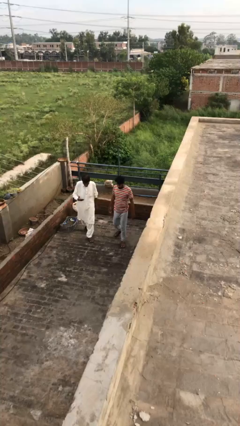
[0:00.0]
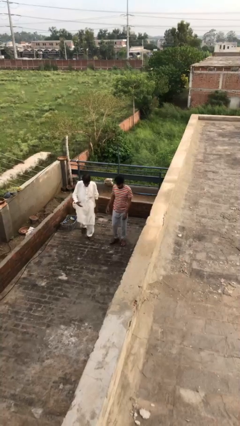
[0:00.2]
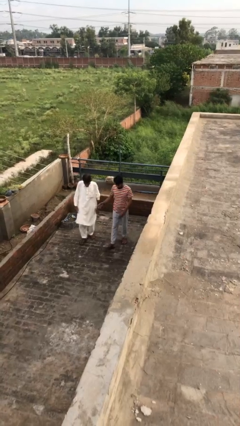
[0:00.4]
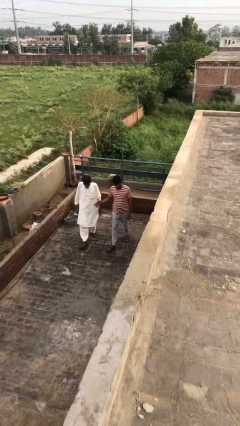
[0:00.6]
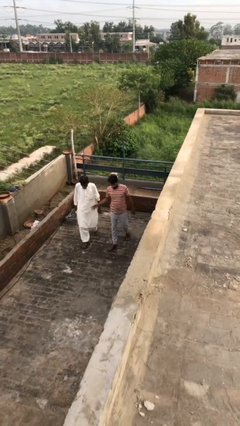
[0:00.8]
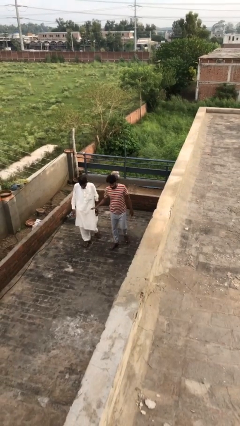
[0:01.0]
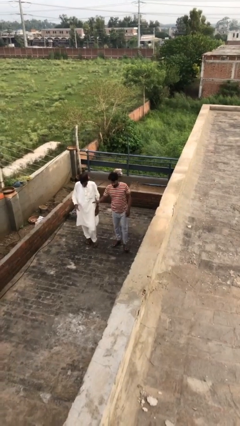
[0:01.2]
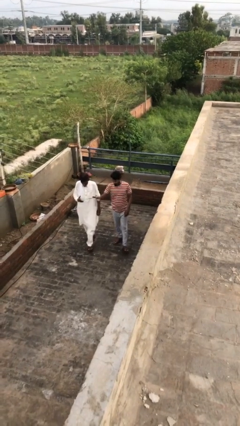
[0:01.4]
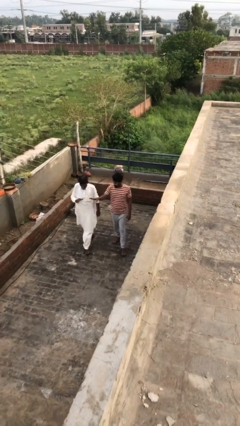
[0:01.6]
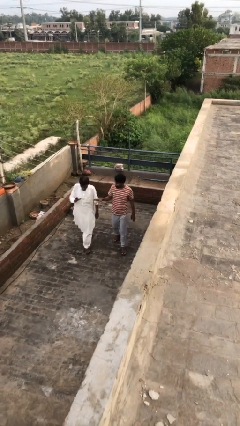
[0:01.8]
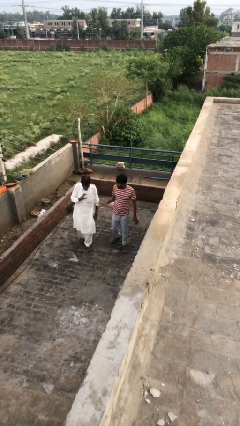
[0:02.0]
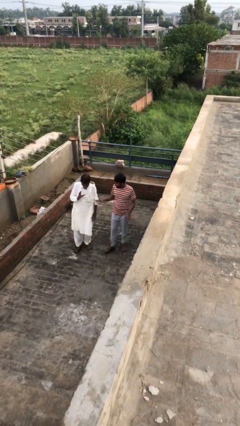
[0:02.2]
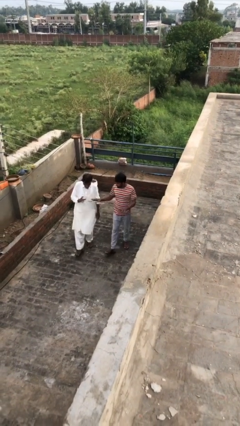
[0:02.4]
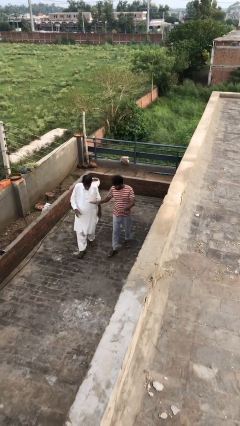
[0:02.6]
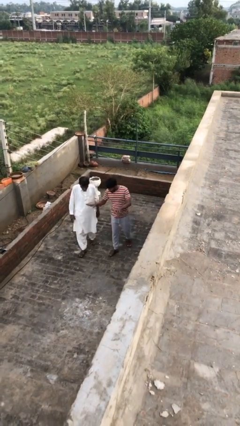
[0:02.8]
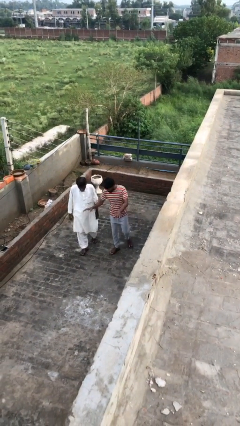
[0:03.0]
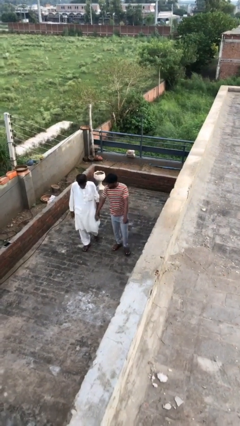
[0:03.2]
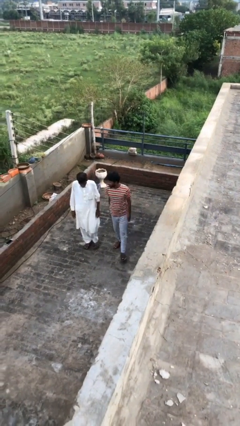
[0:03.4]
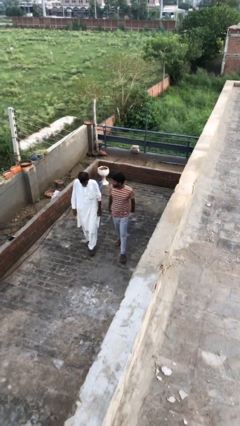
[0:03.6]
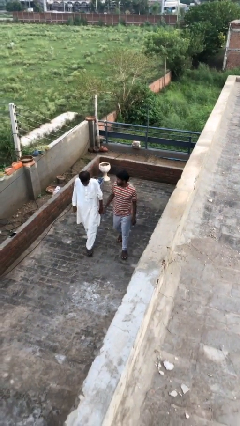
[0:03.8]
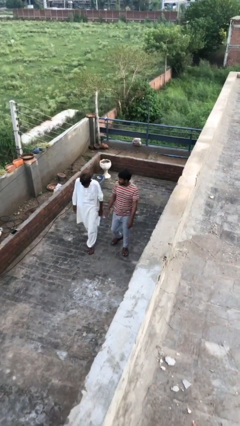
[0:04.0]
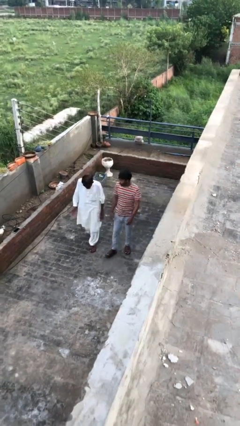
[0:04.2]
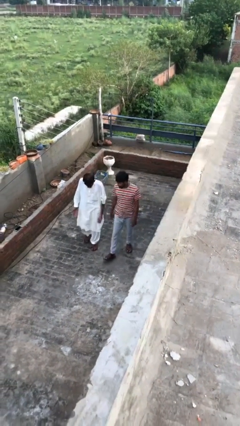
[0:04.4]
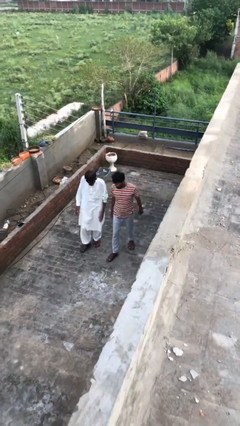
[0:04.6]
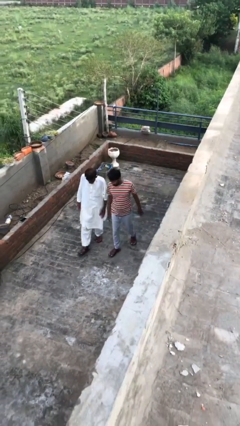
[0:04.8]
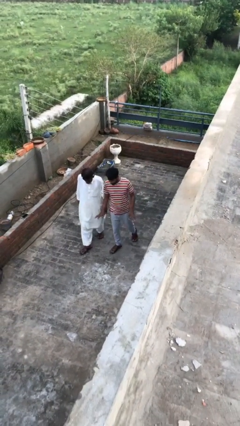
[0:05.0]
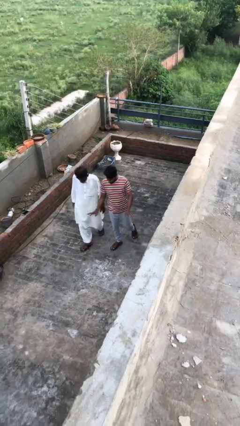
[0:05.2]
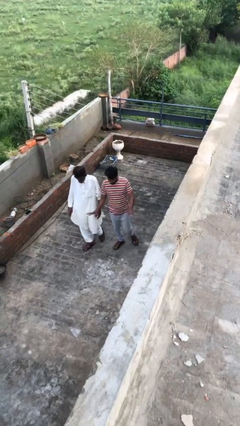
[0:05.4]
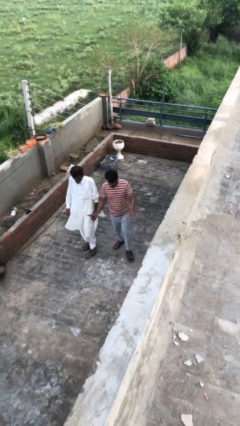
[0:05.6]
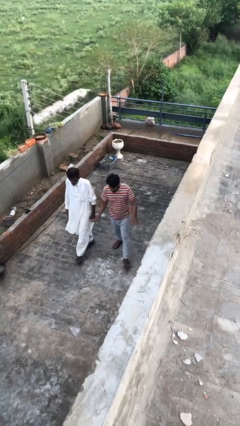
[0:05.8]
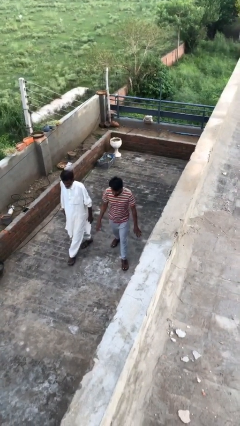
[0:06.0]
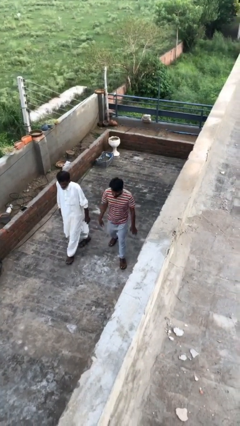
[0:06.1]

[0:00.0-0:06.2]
person talks to person

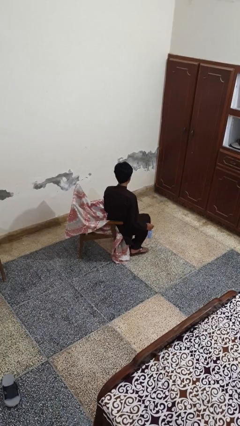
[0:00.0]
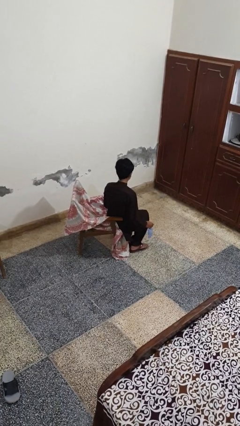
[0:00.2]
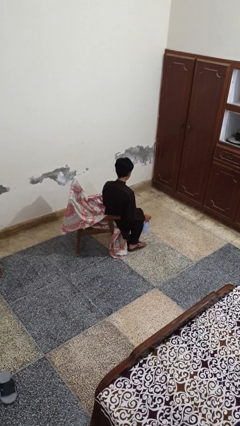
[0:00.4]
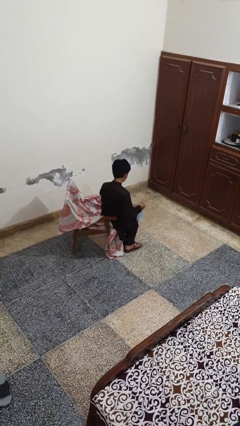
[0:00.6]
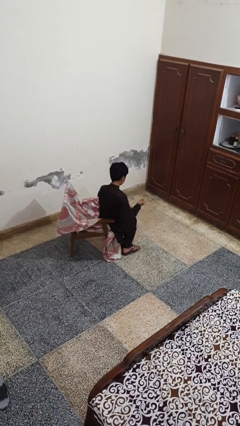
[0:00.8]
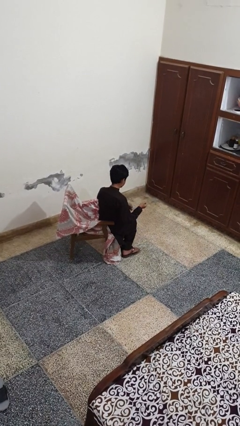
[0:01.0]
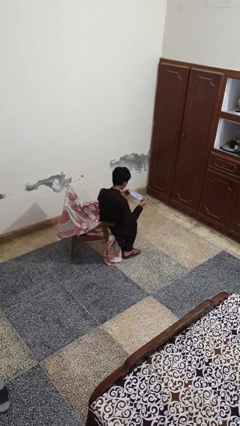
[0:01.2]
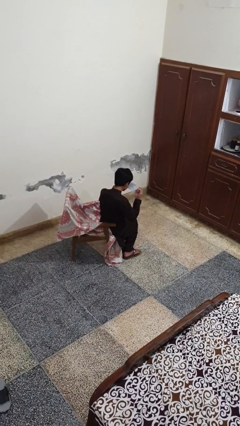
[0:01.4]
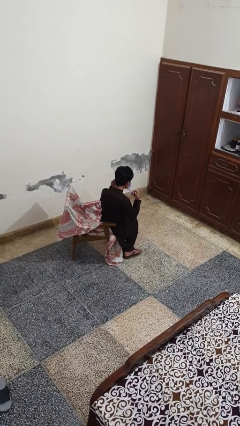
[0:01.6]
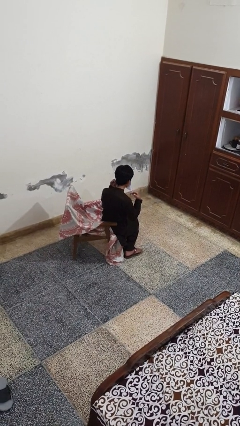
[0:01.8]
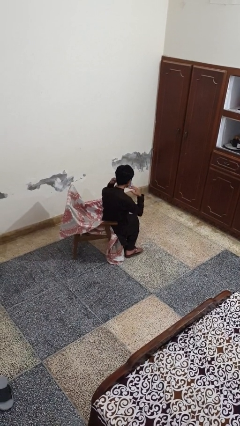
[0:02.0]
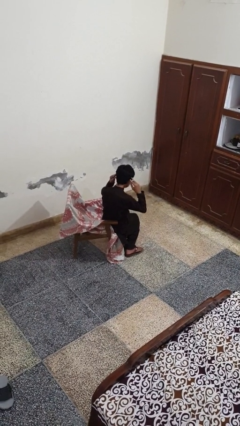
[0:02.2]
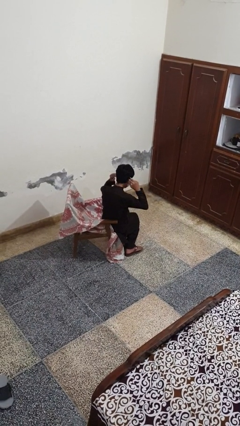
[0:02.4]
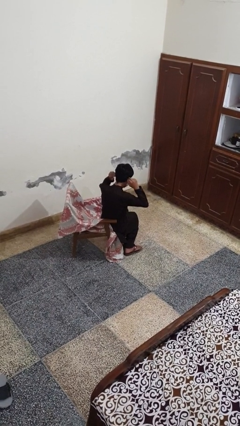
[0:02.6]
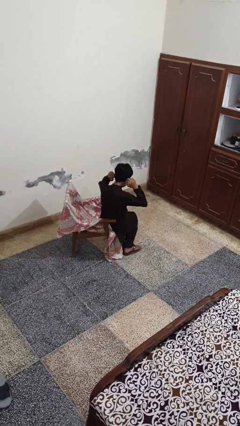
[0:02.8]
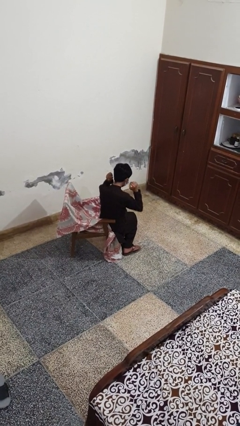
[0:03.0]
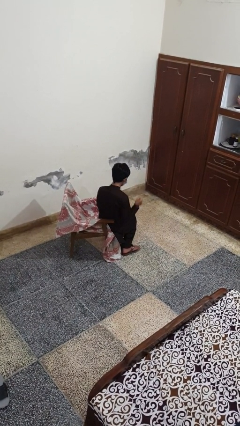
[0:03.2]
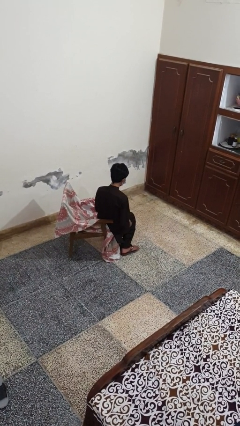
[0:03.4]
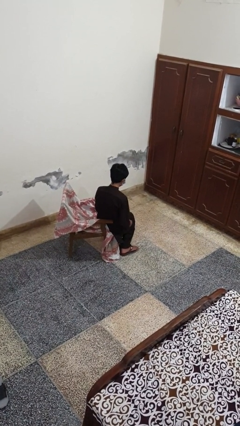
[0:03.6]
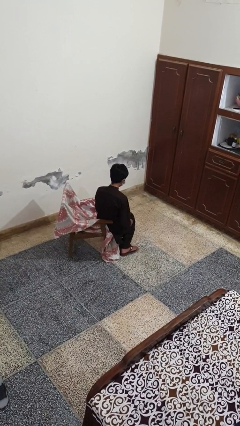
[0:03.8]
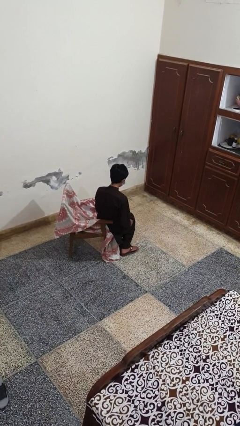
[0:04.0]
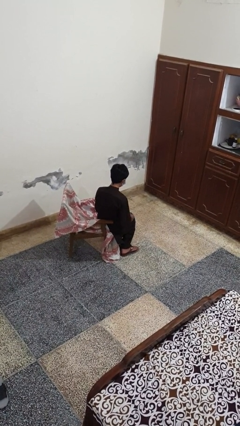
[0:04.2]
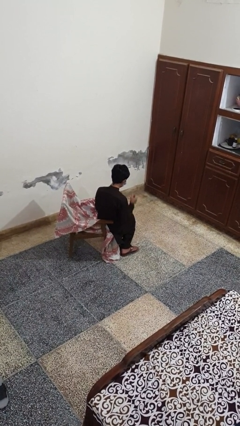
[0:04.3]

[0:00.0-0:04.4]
person puts on facemask

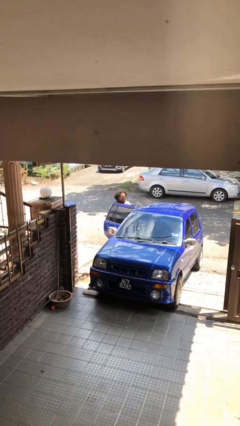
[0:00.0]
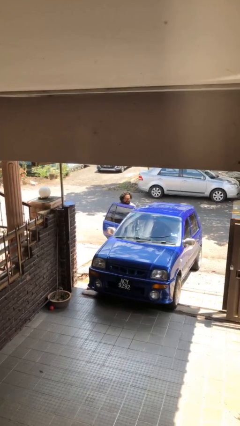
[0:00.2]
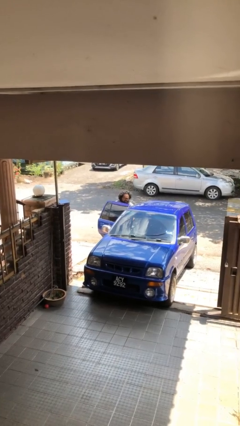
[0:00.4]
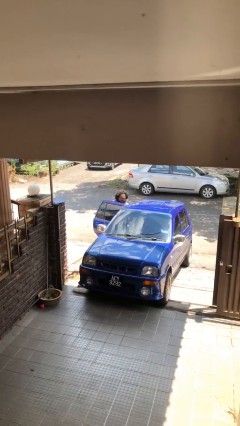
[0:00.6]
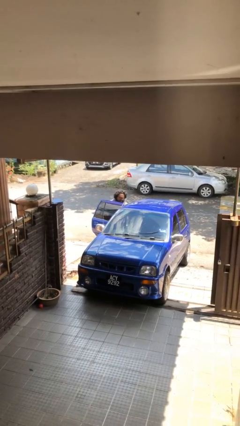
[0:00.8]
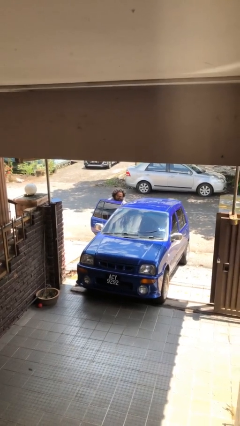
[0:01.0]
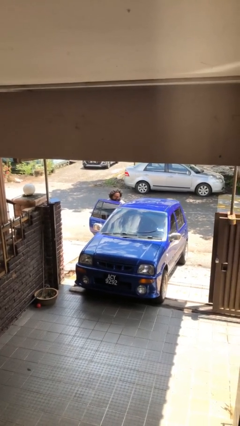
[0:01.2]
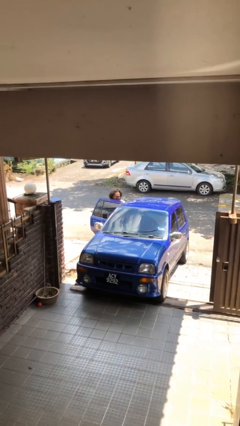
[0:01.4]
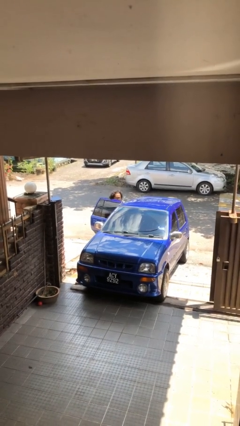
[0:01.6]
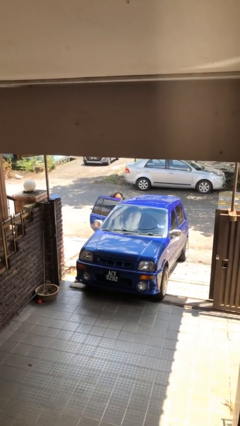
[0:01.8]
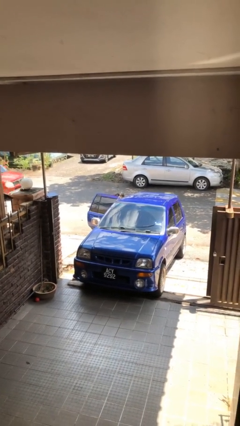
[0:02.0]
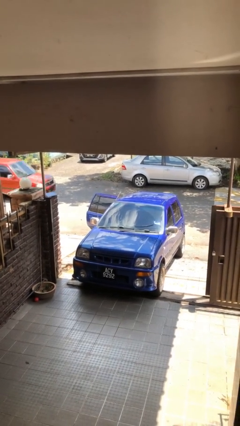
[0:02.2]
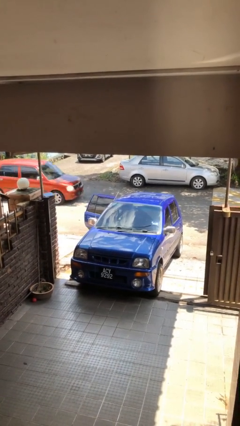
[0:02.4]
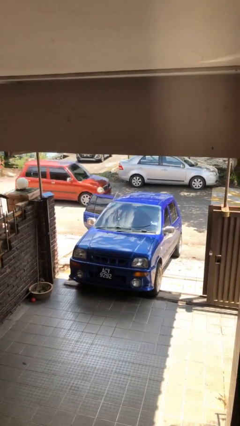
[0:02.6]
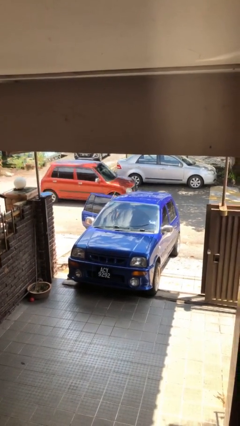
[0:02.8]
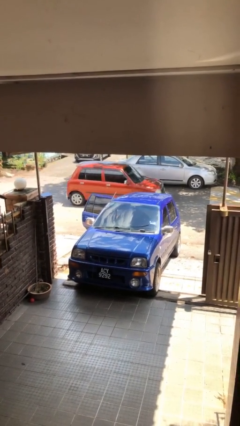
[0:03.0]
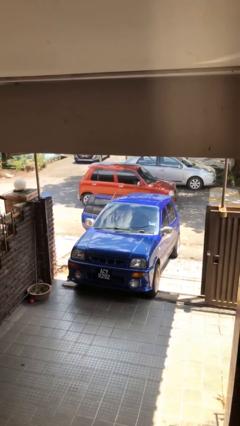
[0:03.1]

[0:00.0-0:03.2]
person enters car

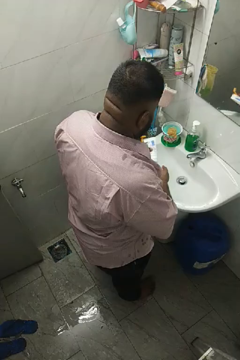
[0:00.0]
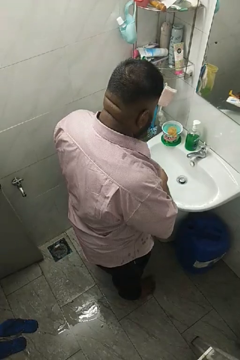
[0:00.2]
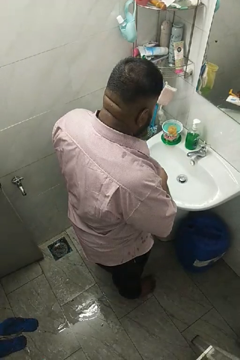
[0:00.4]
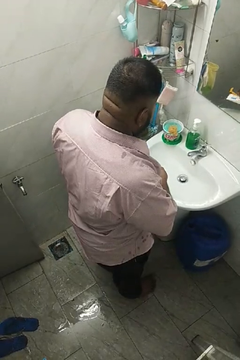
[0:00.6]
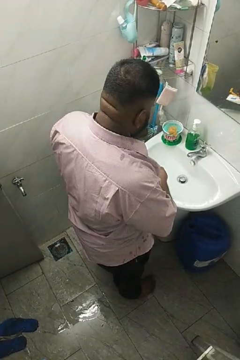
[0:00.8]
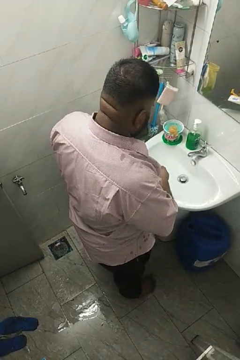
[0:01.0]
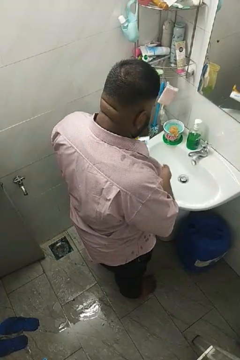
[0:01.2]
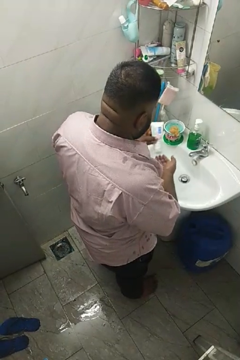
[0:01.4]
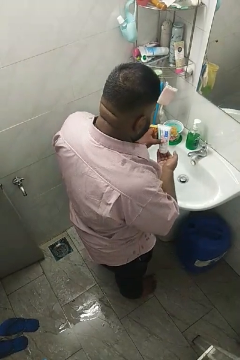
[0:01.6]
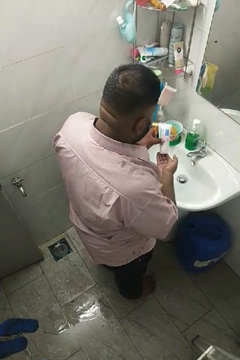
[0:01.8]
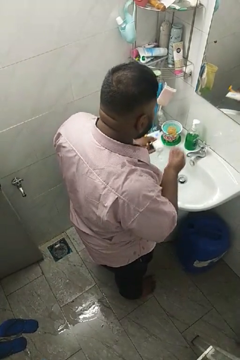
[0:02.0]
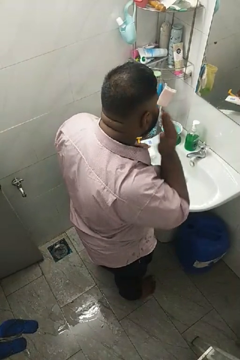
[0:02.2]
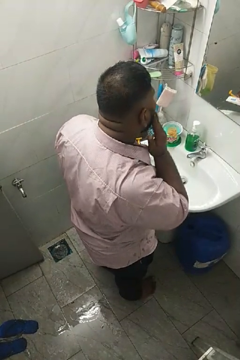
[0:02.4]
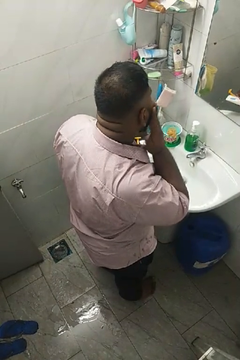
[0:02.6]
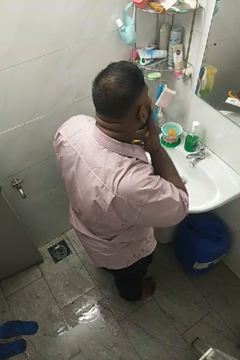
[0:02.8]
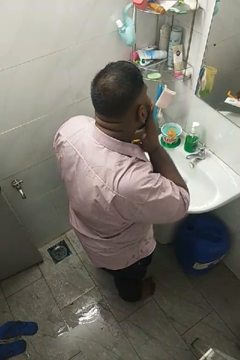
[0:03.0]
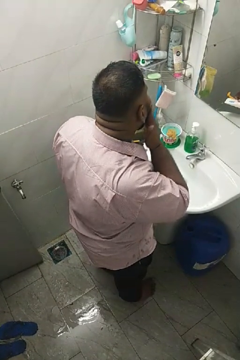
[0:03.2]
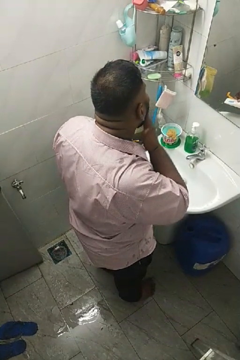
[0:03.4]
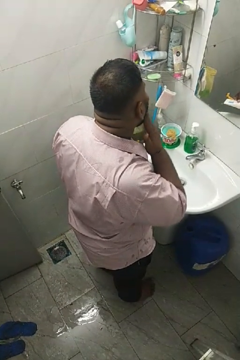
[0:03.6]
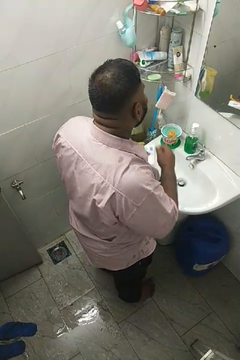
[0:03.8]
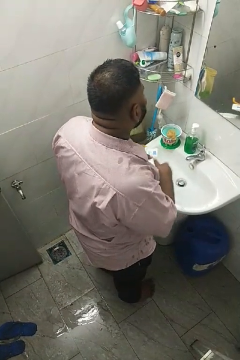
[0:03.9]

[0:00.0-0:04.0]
person applies shaving cream

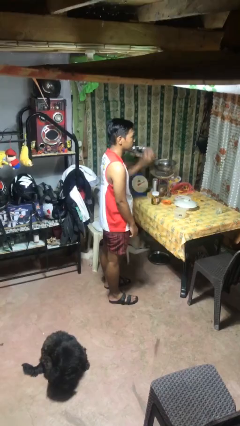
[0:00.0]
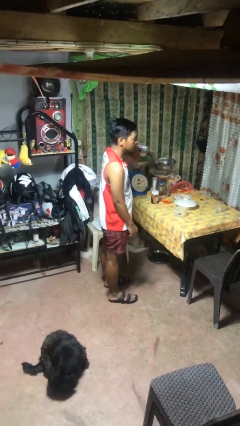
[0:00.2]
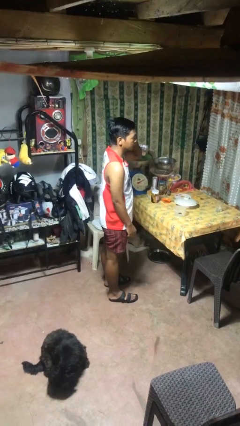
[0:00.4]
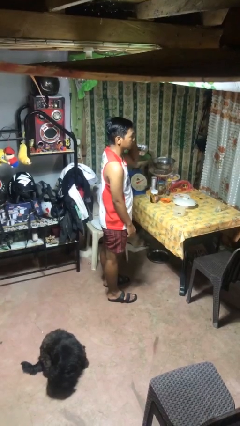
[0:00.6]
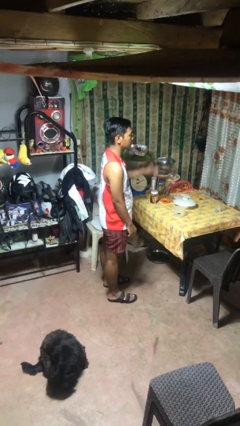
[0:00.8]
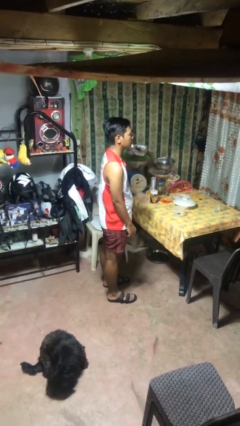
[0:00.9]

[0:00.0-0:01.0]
person gestures behind me
